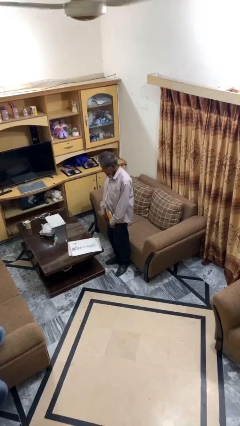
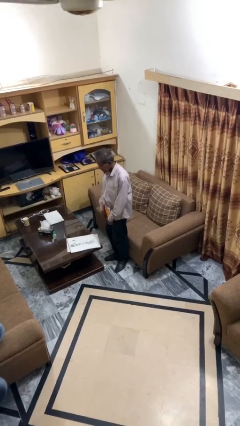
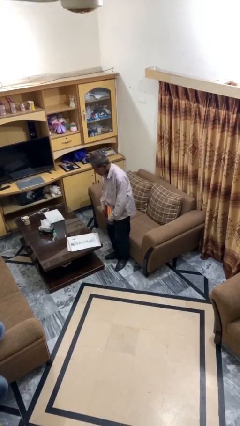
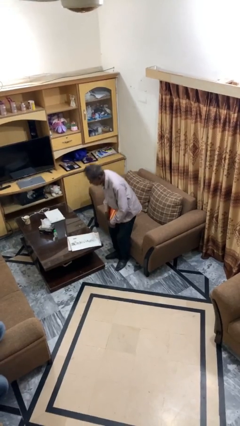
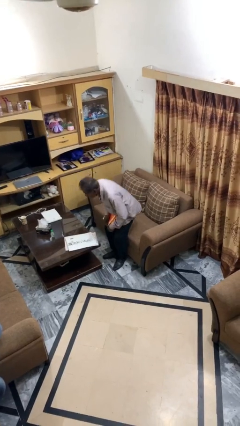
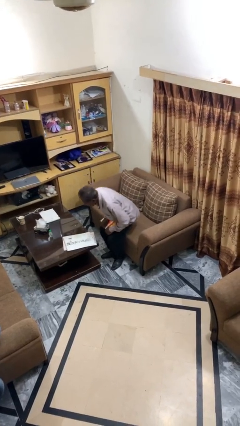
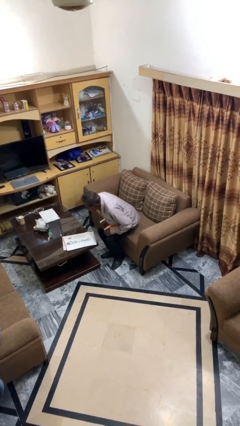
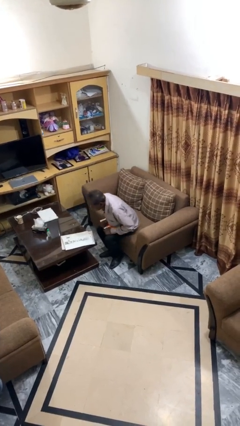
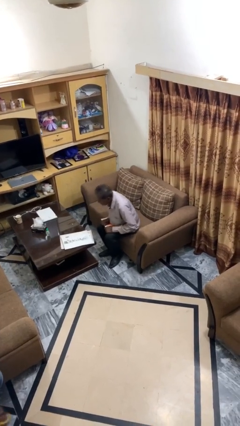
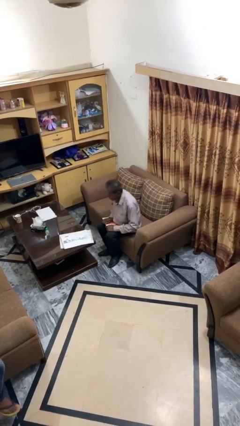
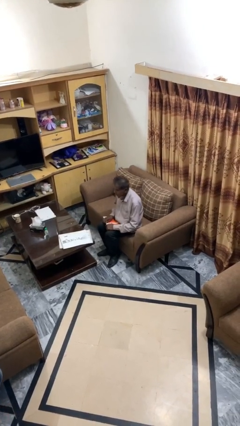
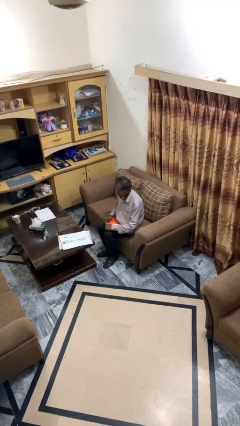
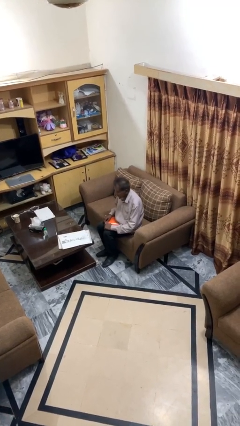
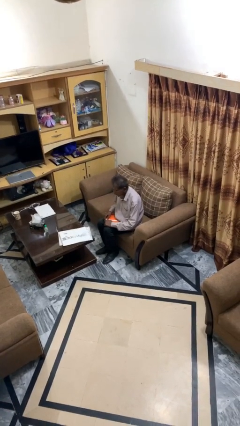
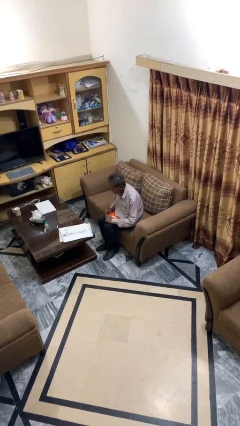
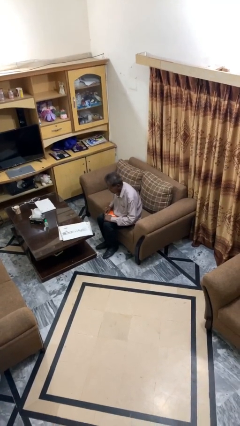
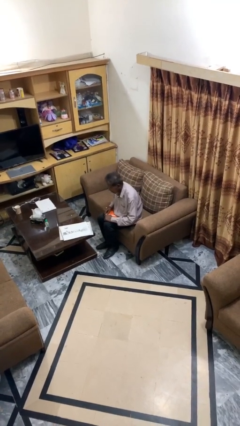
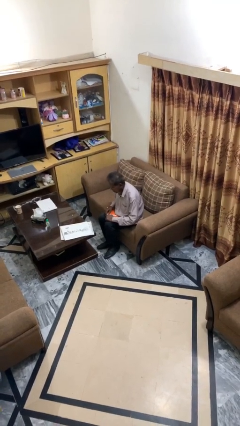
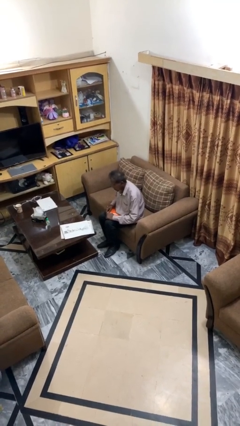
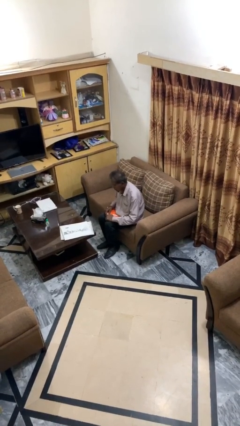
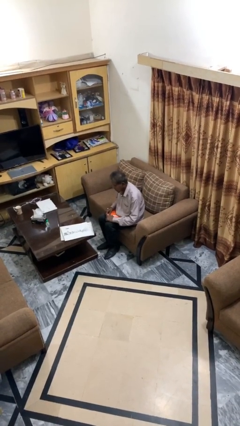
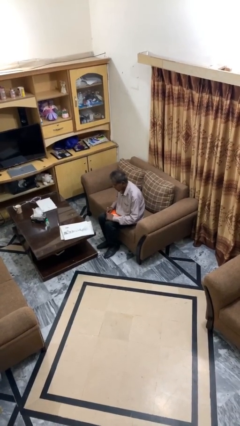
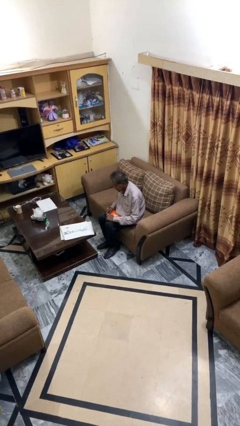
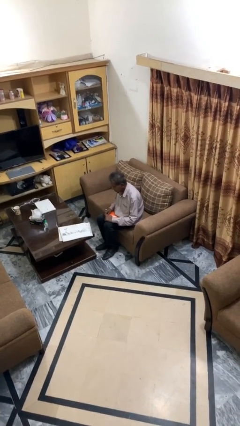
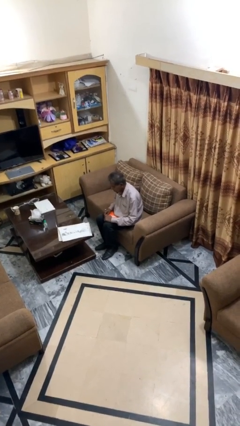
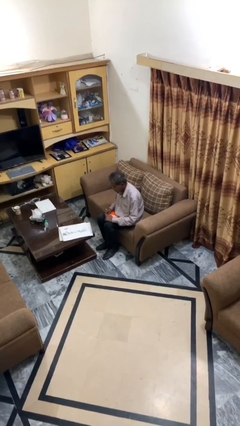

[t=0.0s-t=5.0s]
person sits down

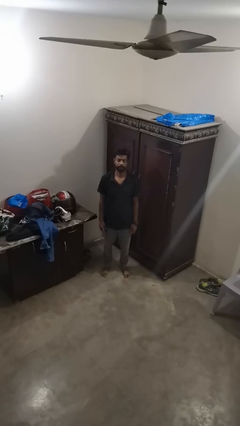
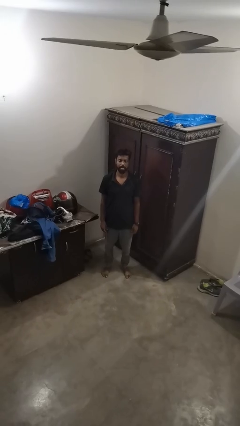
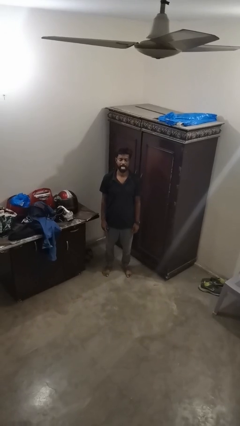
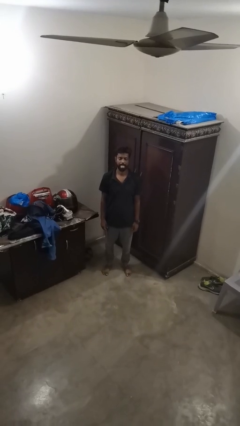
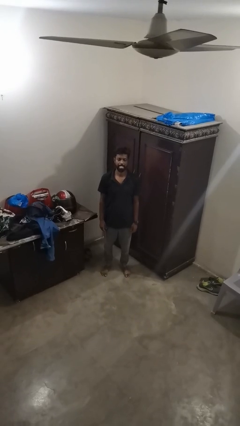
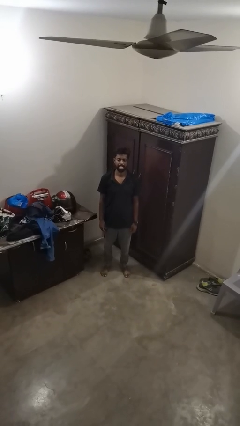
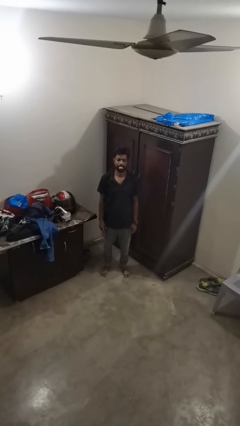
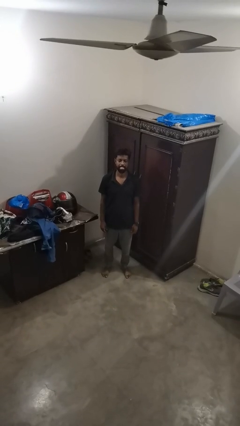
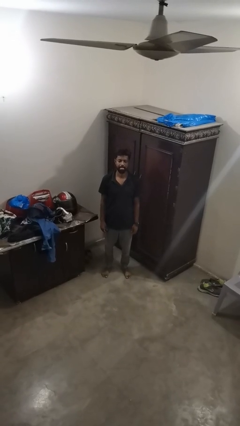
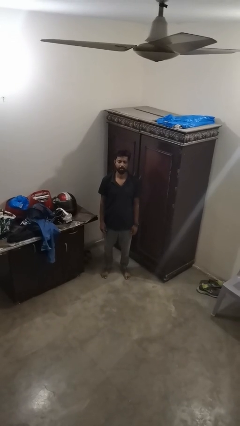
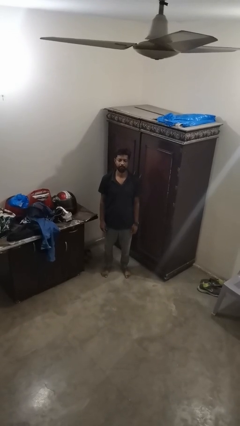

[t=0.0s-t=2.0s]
person sticks out tongue

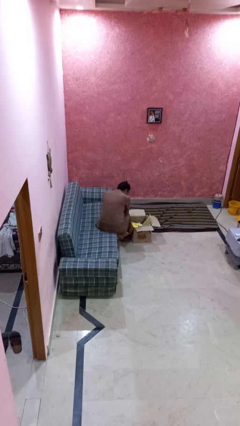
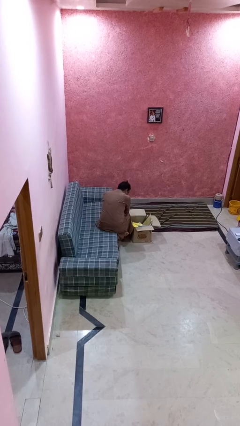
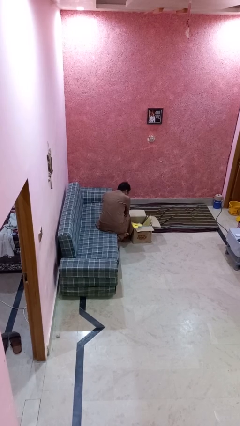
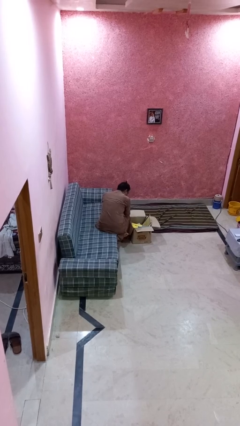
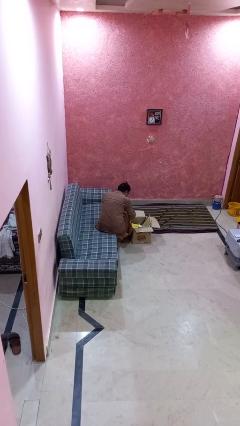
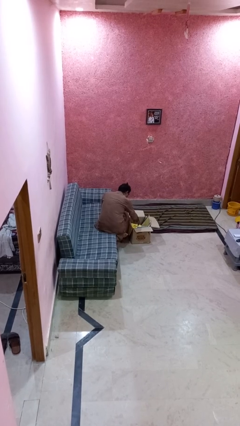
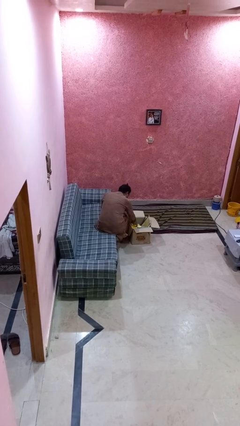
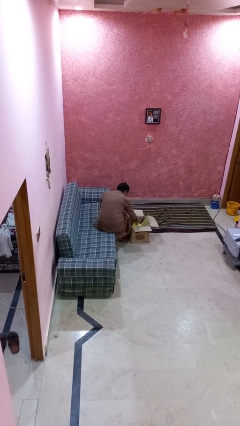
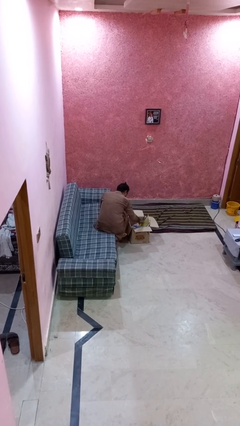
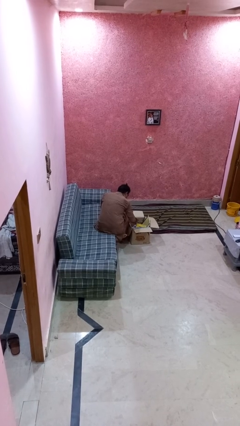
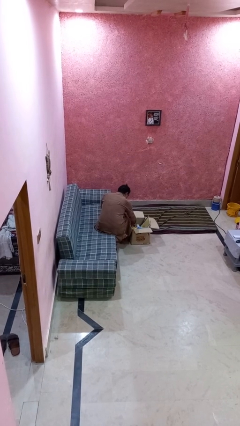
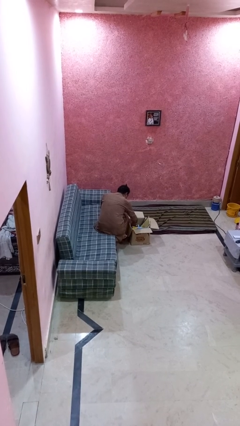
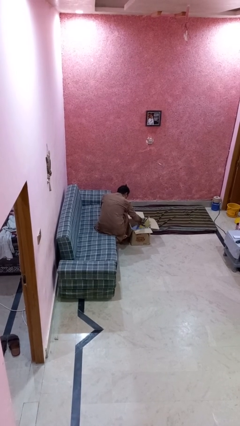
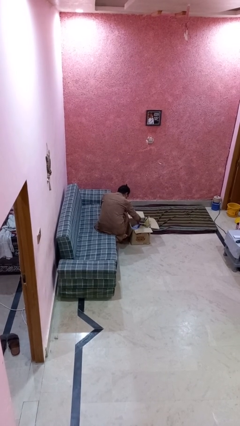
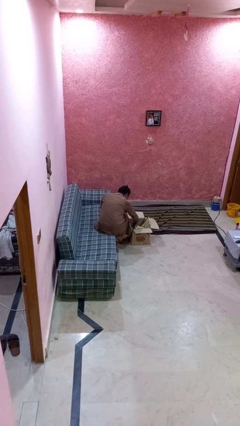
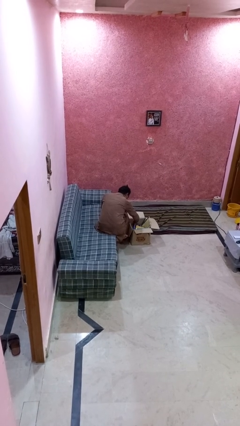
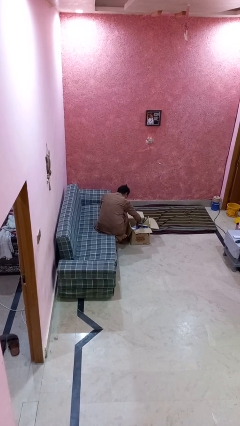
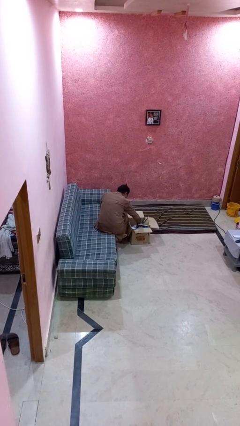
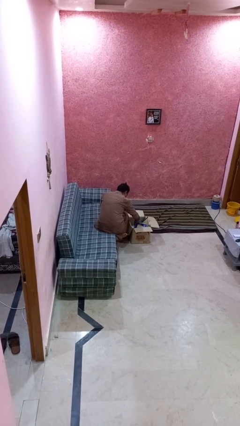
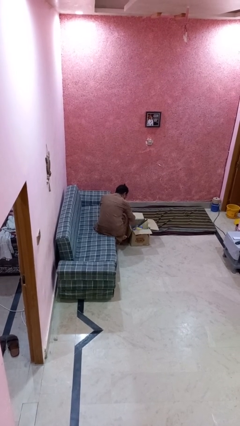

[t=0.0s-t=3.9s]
person searches in box

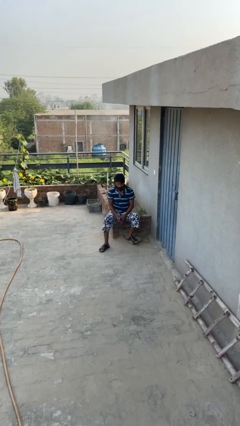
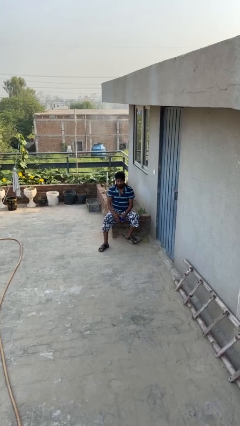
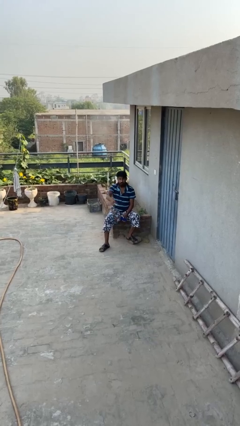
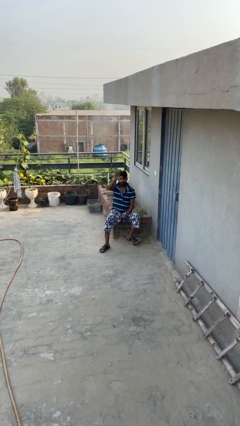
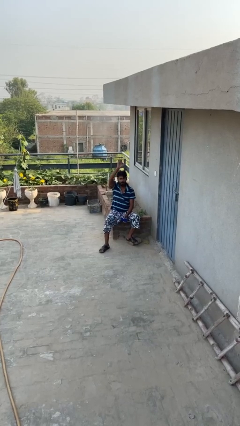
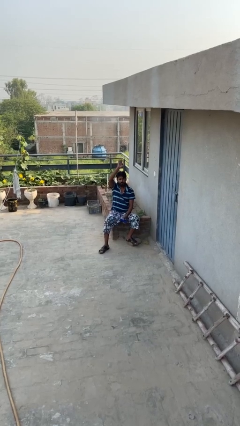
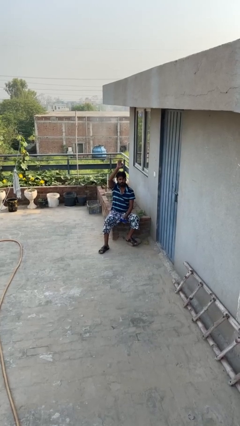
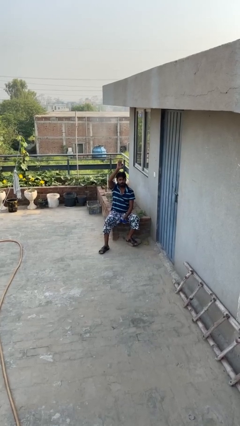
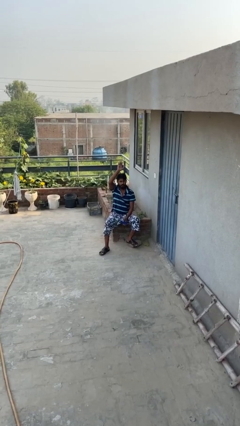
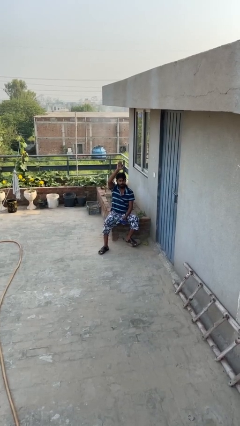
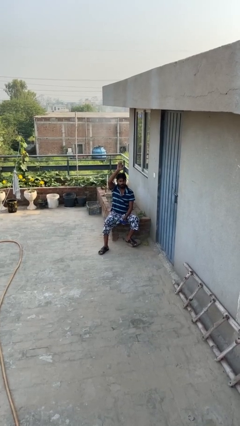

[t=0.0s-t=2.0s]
person gestures raise hand

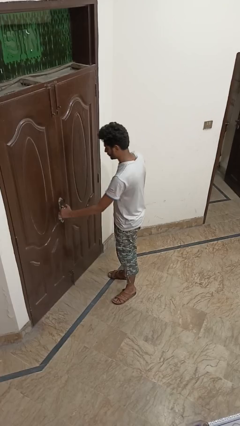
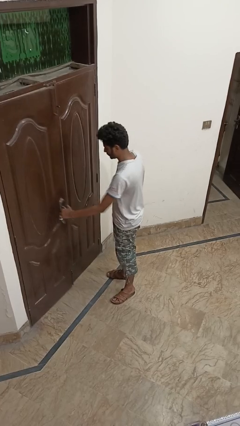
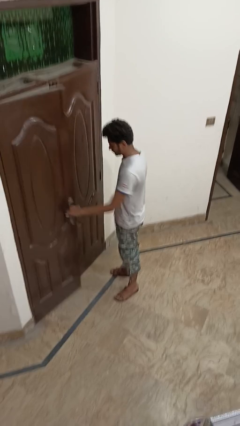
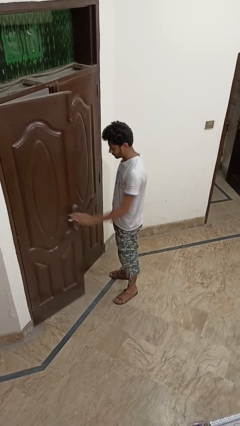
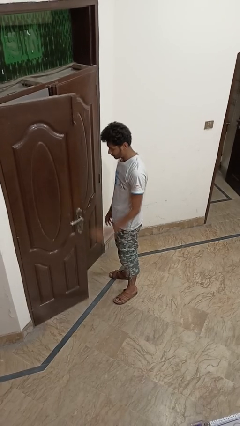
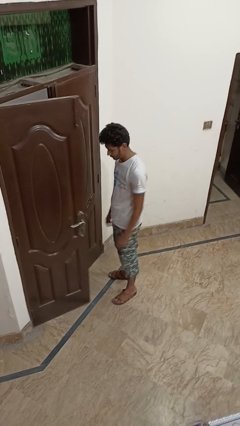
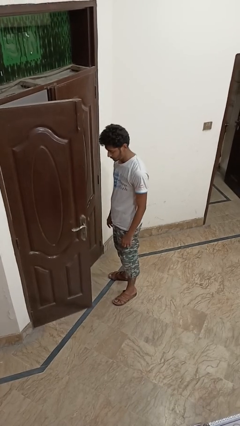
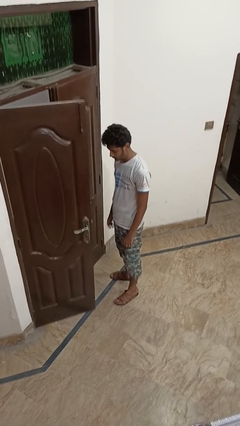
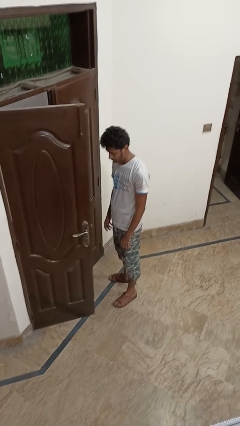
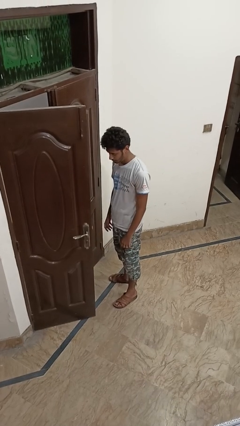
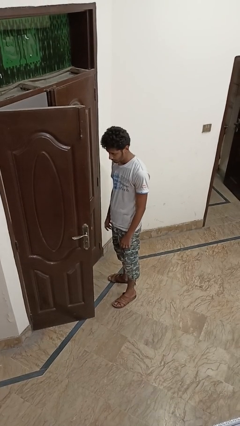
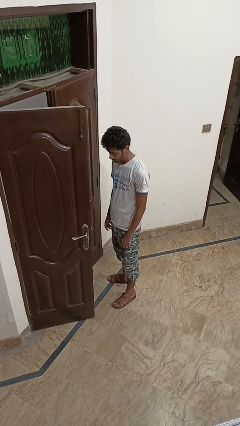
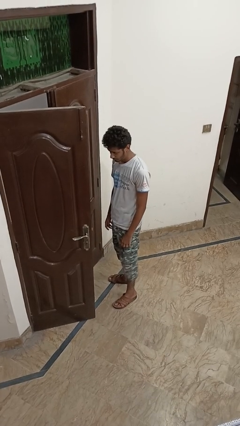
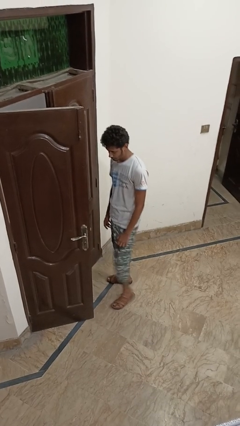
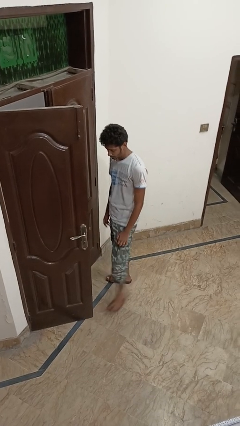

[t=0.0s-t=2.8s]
person opens facility door

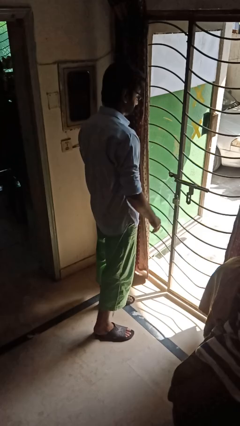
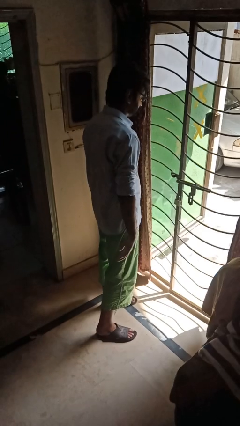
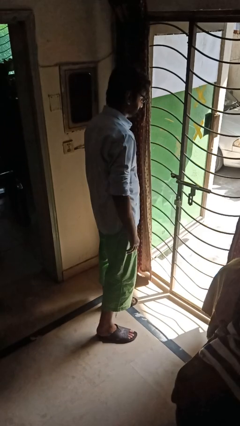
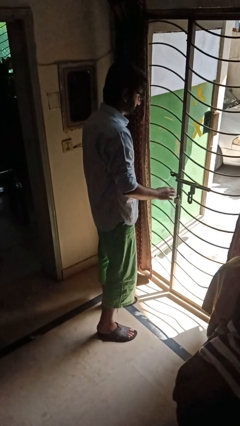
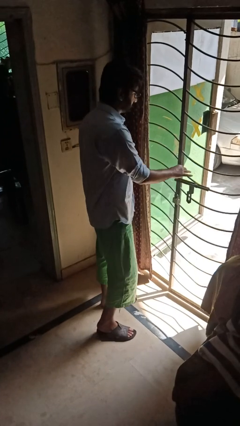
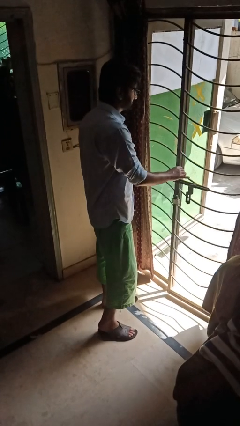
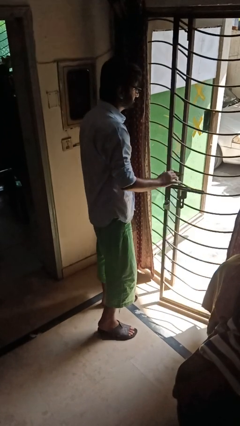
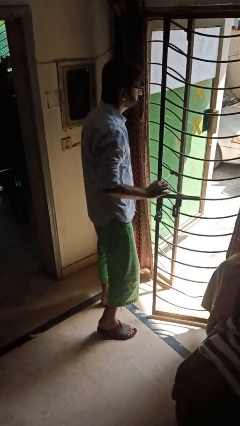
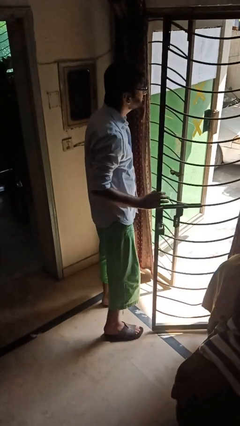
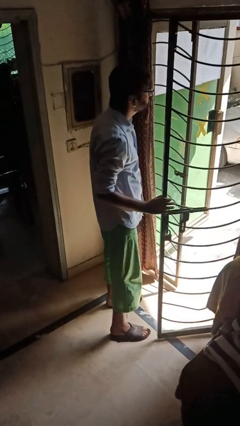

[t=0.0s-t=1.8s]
person opens gate

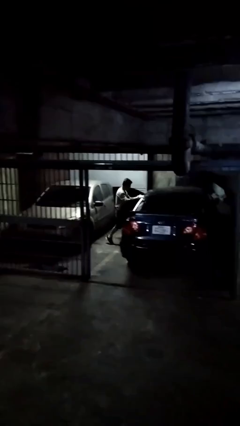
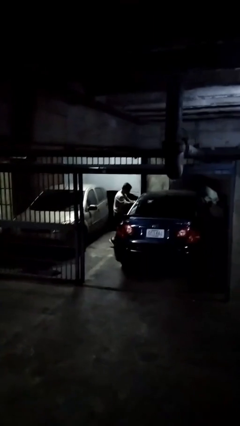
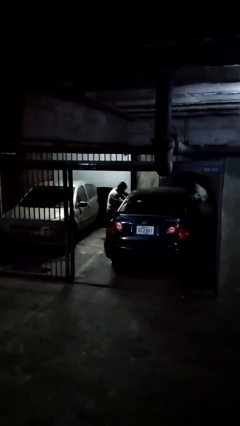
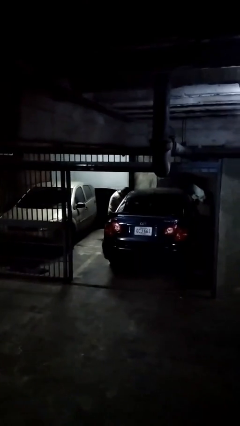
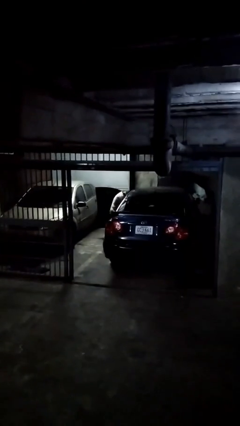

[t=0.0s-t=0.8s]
person loads car
